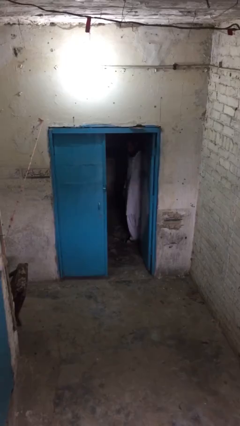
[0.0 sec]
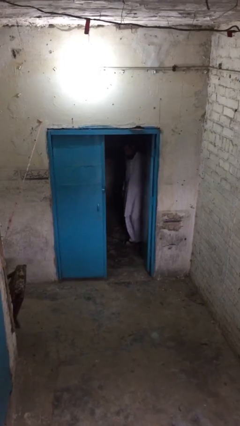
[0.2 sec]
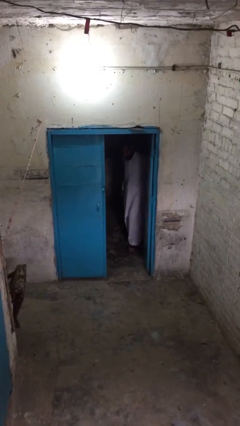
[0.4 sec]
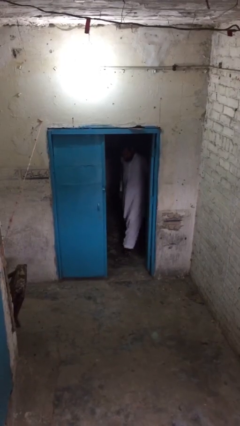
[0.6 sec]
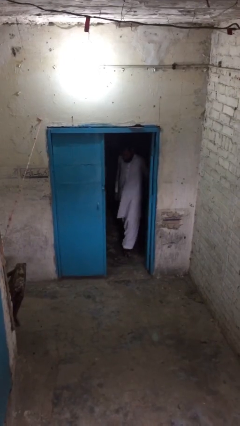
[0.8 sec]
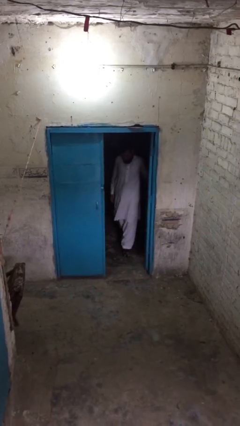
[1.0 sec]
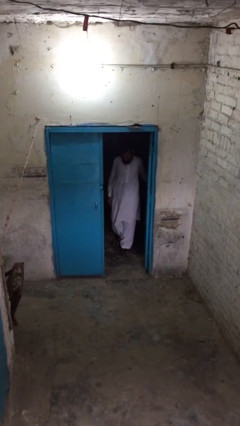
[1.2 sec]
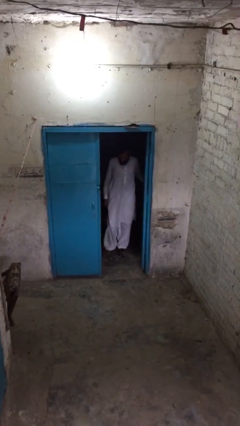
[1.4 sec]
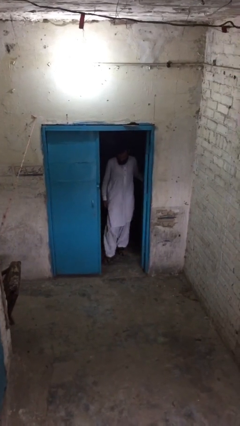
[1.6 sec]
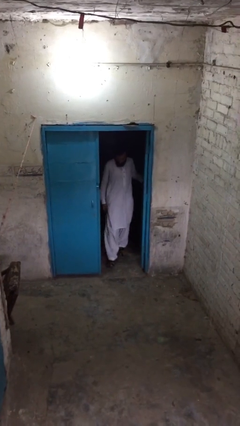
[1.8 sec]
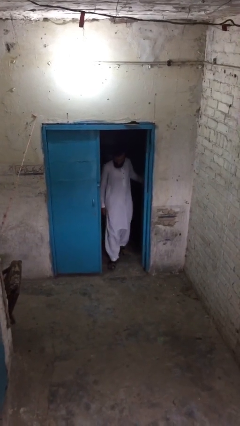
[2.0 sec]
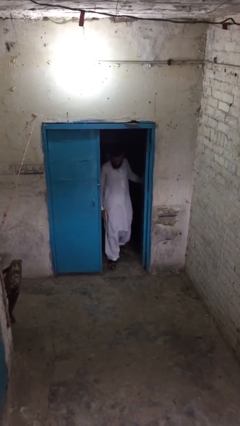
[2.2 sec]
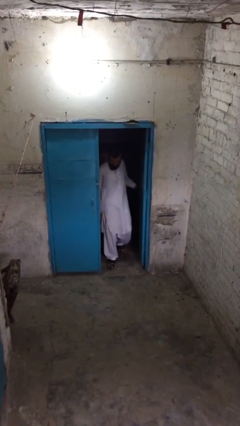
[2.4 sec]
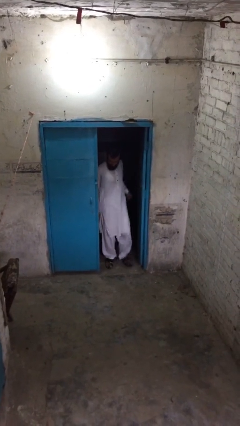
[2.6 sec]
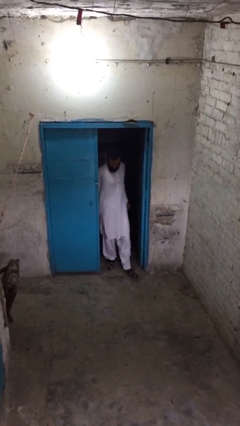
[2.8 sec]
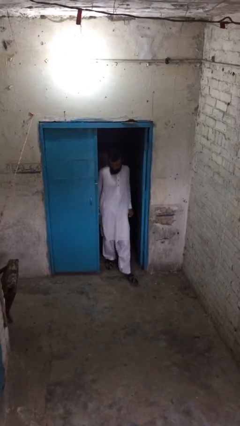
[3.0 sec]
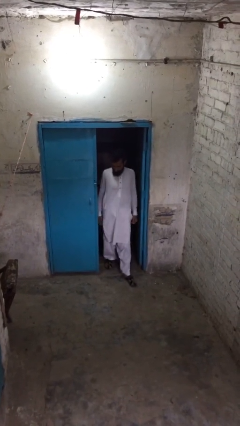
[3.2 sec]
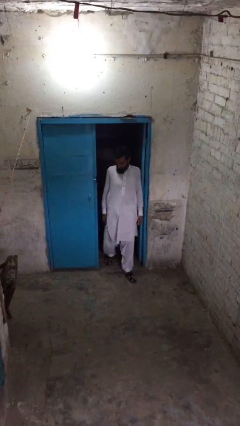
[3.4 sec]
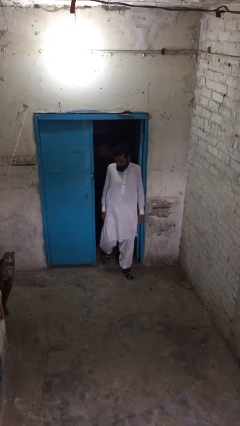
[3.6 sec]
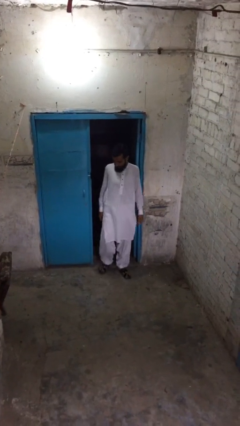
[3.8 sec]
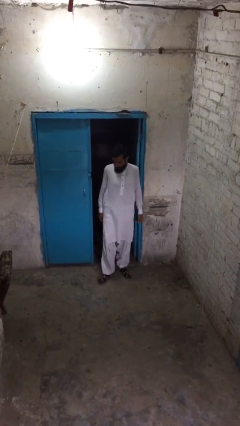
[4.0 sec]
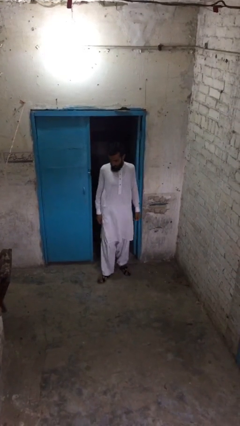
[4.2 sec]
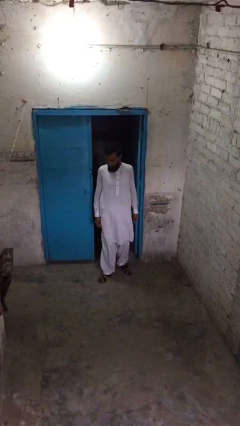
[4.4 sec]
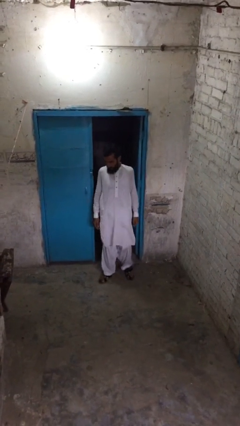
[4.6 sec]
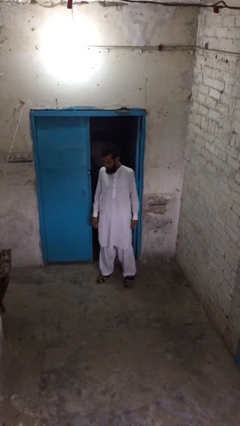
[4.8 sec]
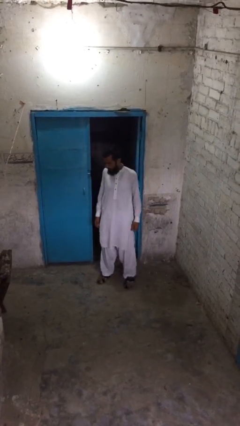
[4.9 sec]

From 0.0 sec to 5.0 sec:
person enters scene through structure

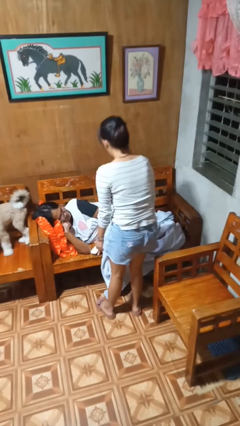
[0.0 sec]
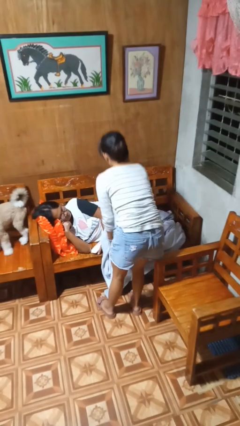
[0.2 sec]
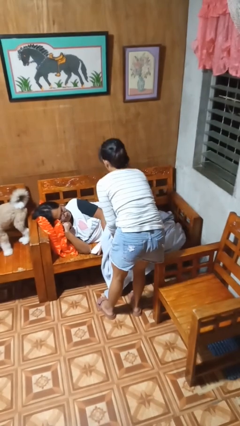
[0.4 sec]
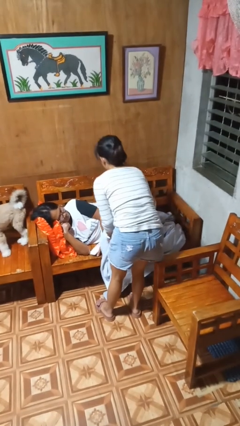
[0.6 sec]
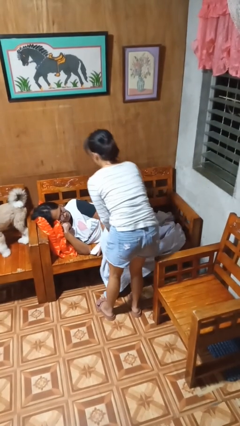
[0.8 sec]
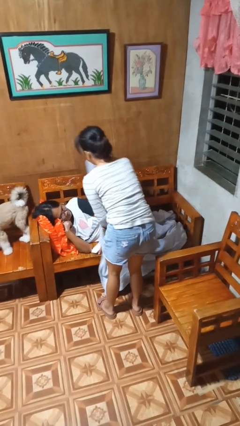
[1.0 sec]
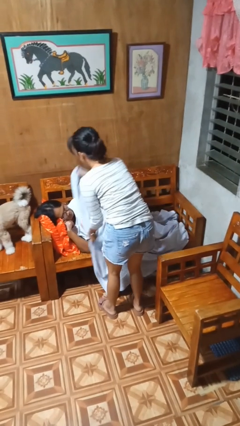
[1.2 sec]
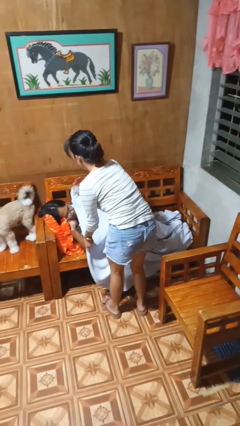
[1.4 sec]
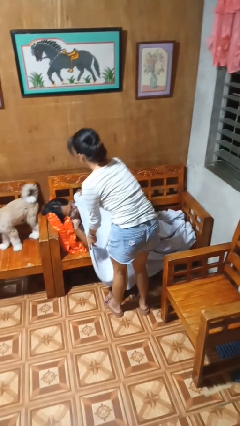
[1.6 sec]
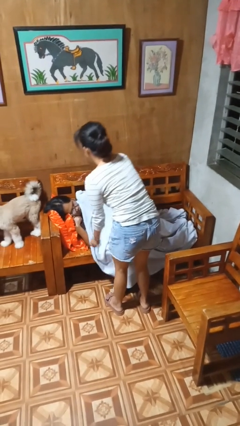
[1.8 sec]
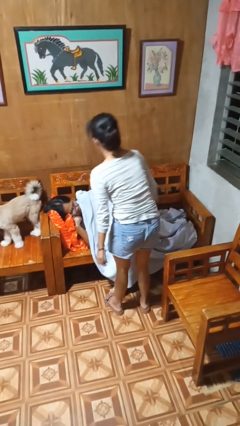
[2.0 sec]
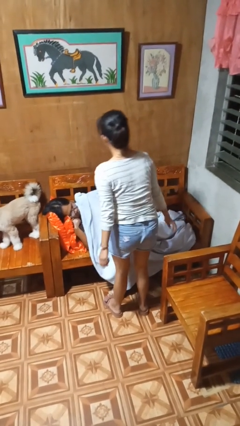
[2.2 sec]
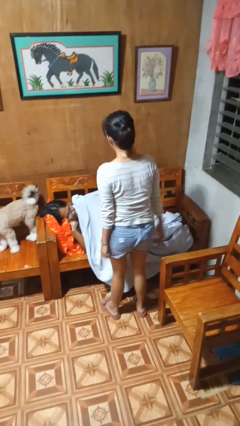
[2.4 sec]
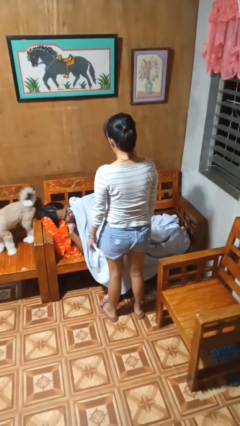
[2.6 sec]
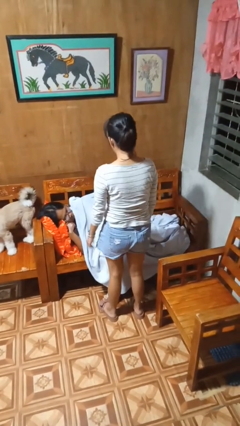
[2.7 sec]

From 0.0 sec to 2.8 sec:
person covers friend with blanket

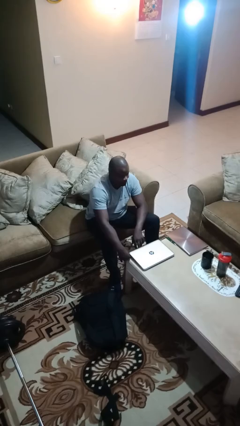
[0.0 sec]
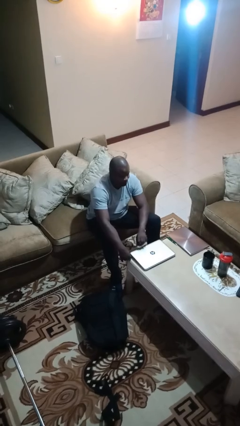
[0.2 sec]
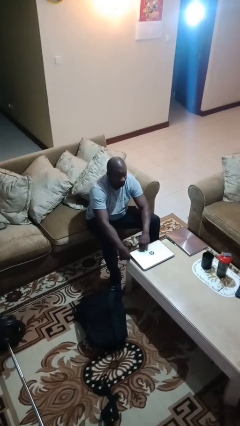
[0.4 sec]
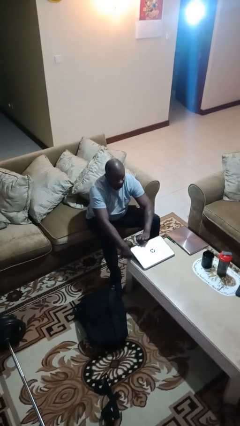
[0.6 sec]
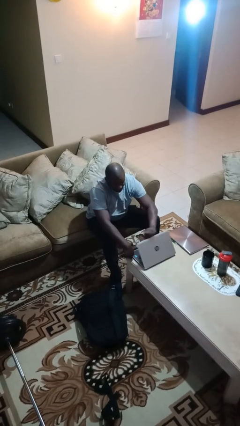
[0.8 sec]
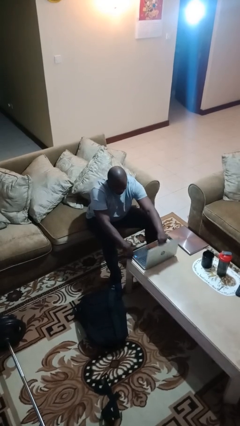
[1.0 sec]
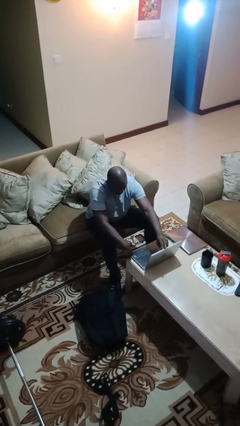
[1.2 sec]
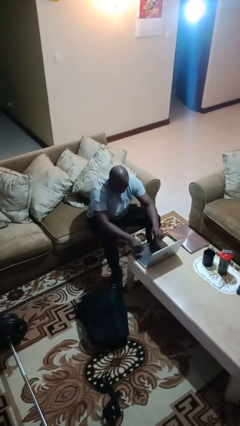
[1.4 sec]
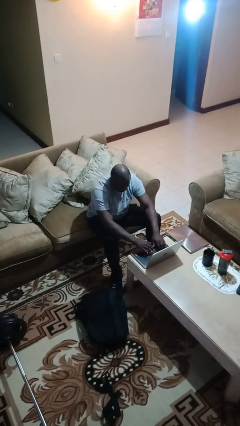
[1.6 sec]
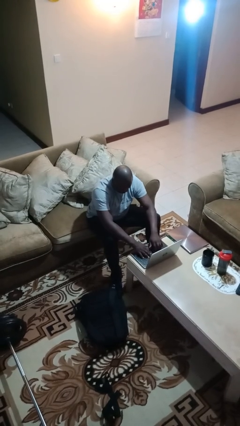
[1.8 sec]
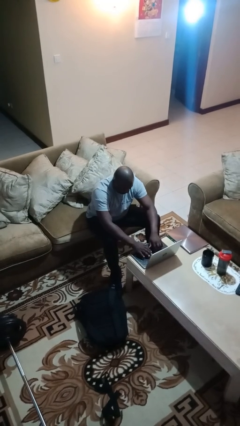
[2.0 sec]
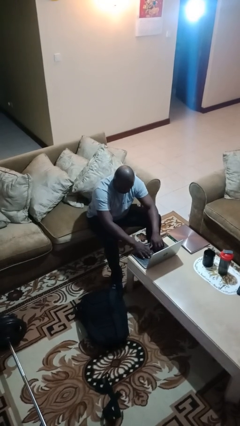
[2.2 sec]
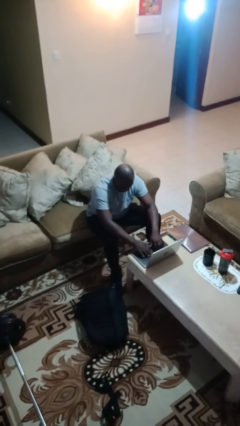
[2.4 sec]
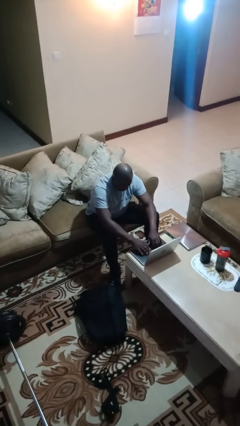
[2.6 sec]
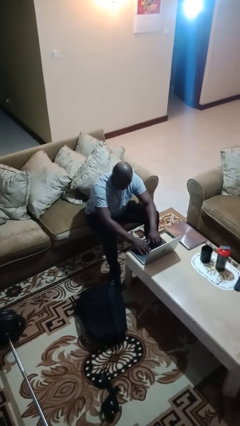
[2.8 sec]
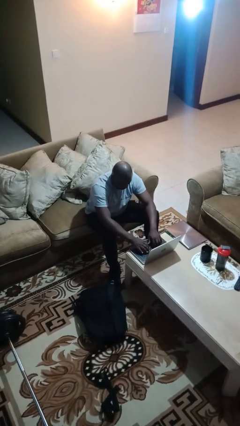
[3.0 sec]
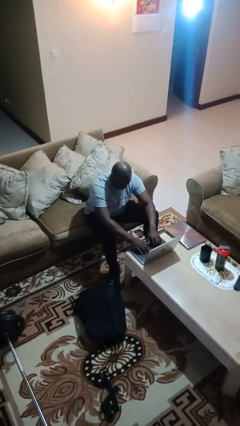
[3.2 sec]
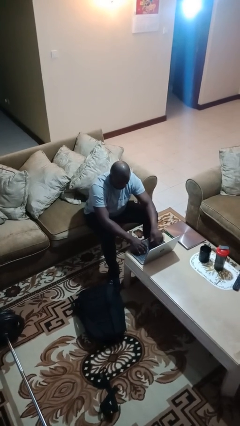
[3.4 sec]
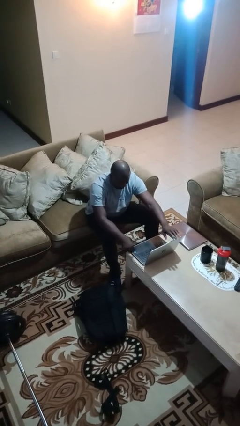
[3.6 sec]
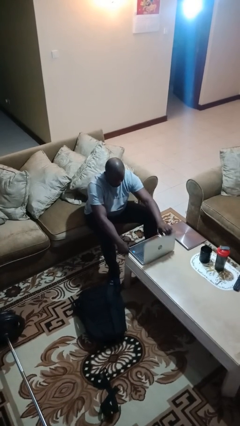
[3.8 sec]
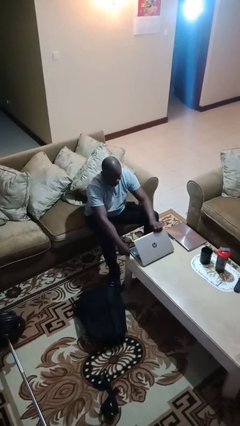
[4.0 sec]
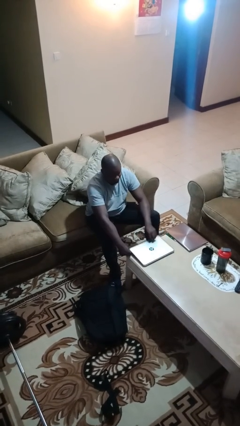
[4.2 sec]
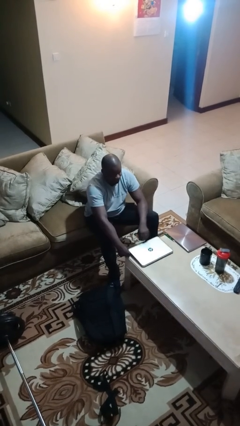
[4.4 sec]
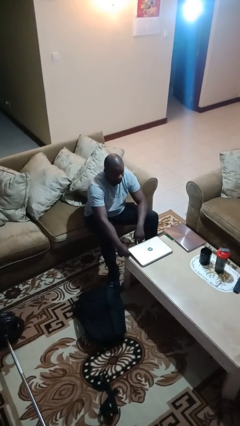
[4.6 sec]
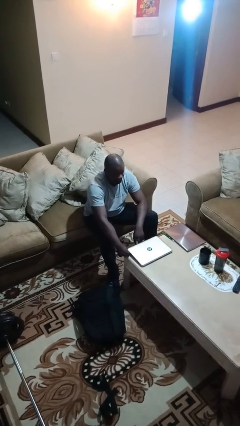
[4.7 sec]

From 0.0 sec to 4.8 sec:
person interacts with laptop

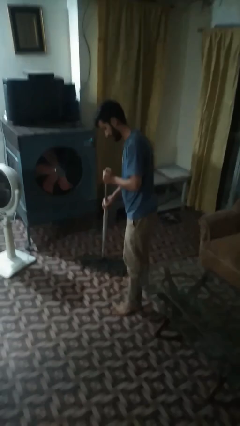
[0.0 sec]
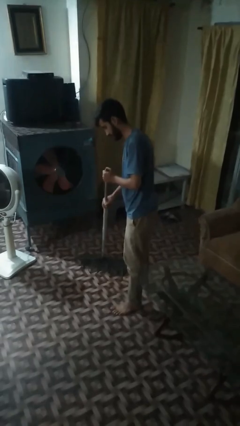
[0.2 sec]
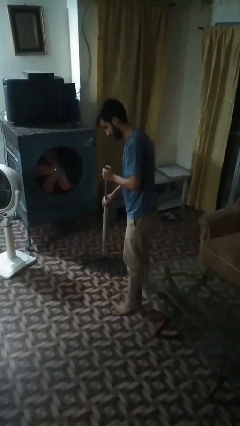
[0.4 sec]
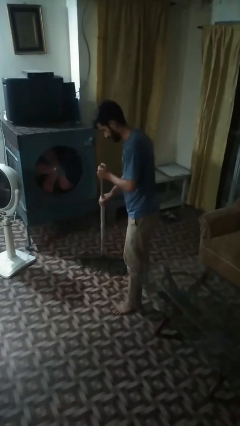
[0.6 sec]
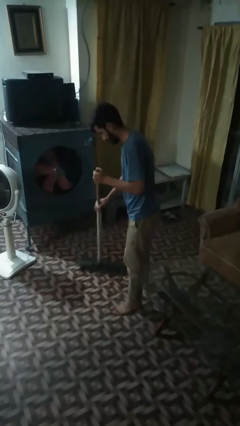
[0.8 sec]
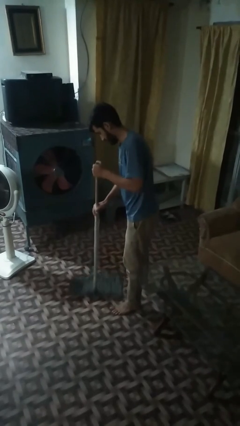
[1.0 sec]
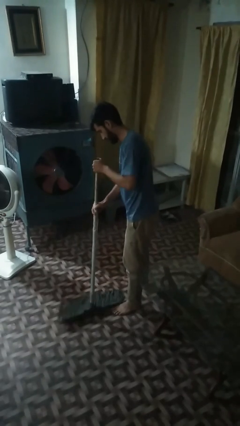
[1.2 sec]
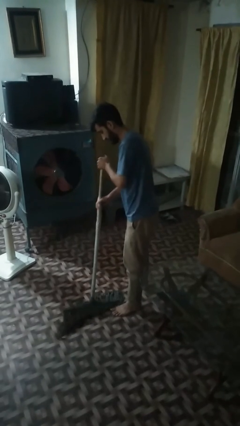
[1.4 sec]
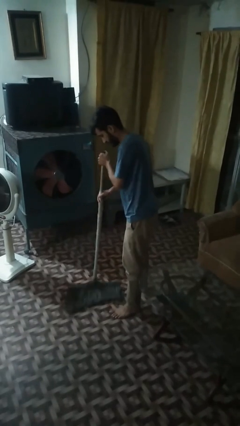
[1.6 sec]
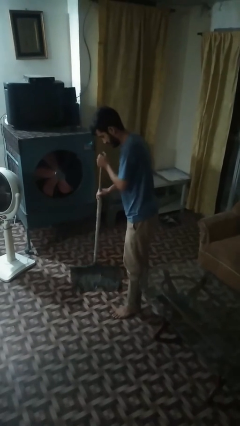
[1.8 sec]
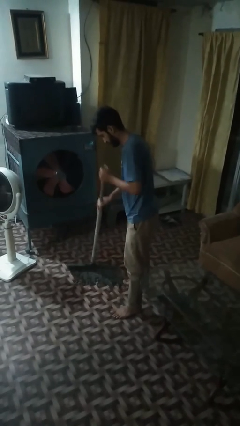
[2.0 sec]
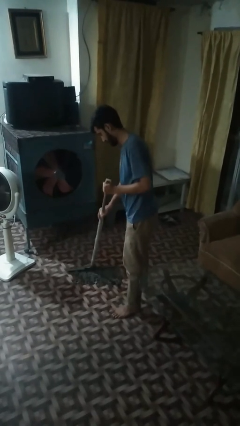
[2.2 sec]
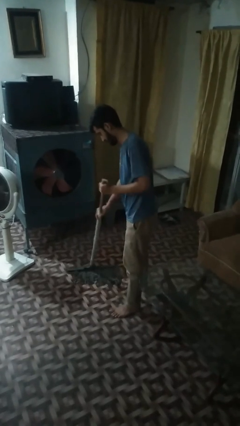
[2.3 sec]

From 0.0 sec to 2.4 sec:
person mops

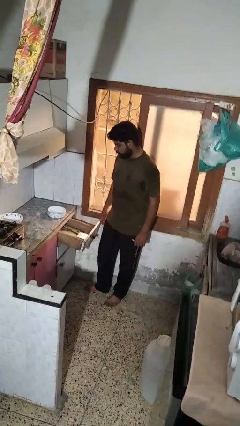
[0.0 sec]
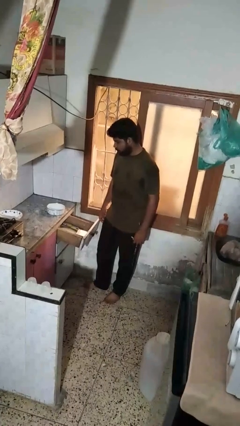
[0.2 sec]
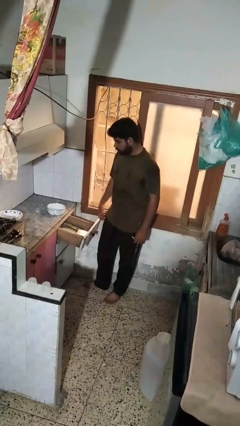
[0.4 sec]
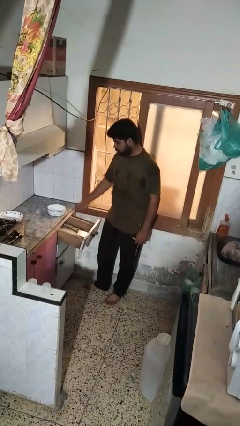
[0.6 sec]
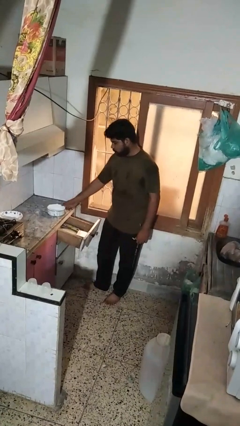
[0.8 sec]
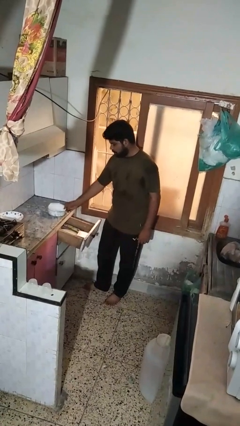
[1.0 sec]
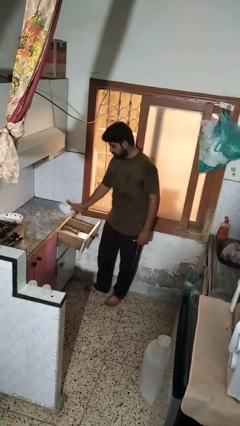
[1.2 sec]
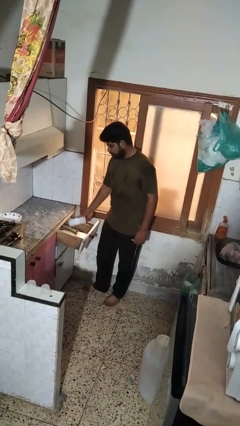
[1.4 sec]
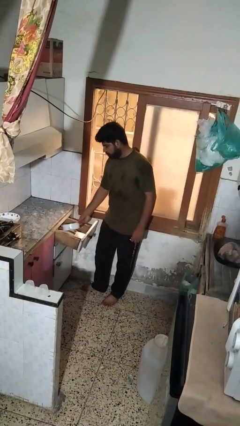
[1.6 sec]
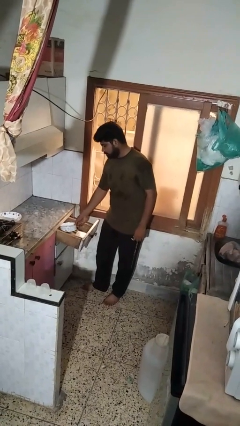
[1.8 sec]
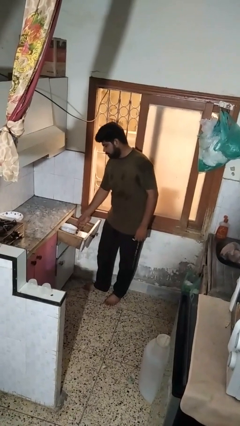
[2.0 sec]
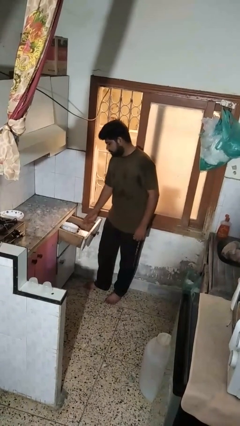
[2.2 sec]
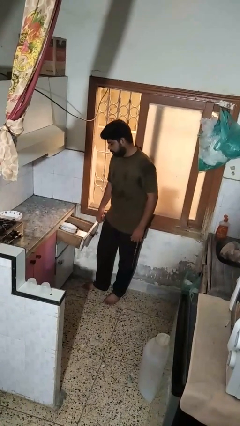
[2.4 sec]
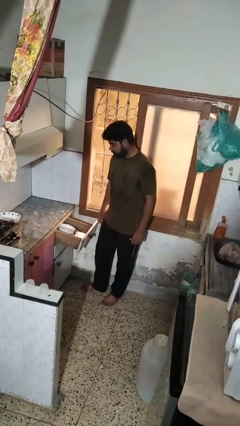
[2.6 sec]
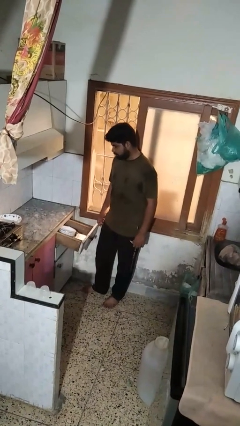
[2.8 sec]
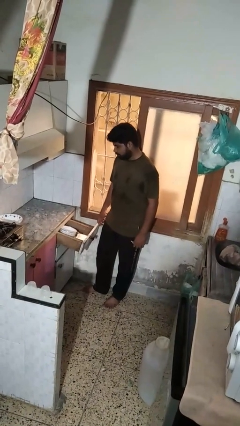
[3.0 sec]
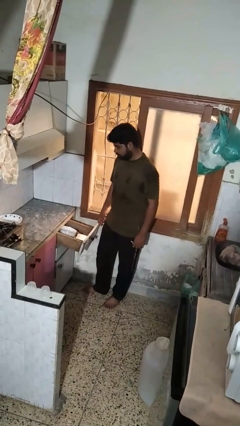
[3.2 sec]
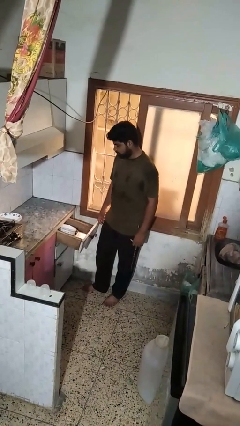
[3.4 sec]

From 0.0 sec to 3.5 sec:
person puts object into kitchen drawer
